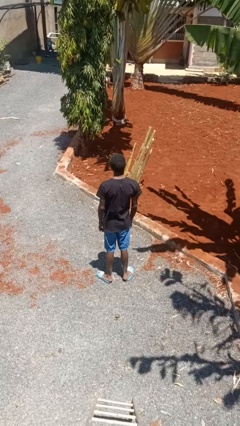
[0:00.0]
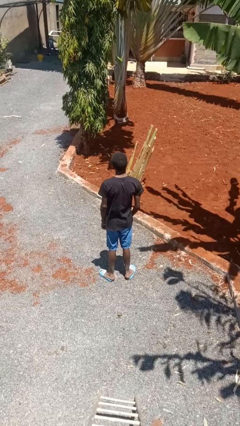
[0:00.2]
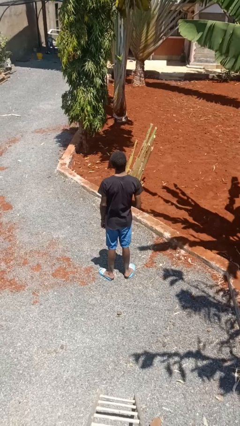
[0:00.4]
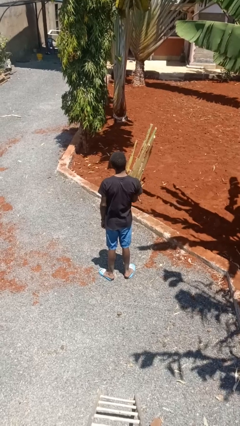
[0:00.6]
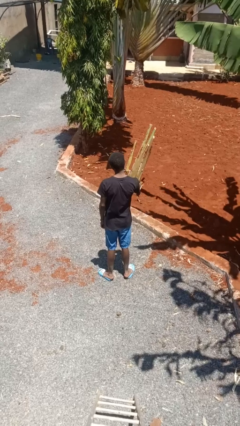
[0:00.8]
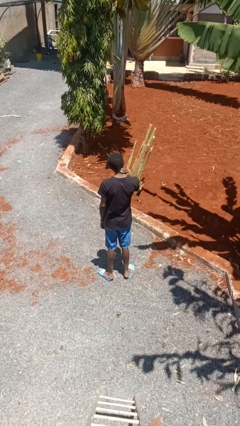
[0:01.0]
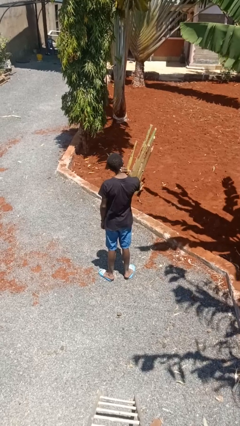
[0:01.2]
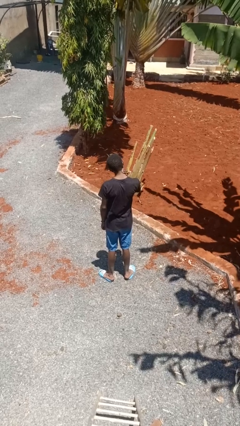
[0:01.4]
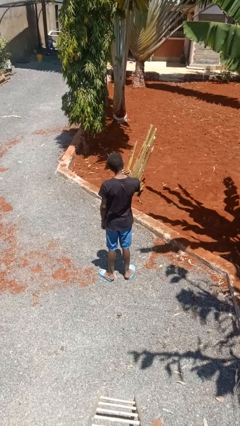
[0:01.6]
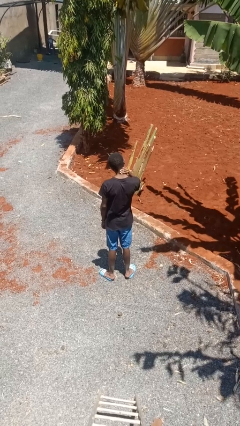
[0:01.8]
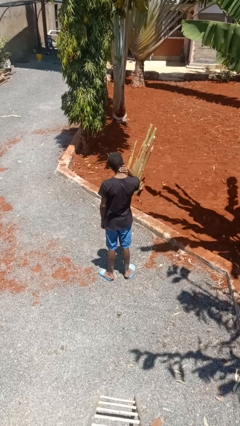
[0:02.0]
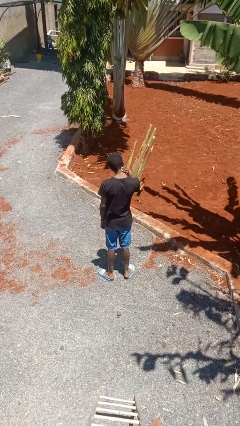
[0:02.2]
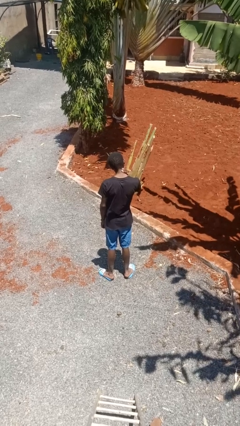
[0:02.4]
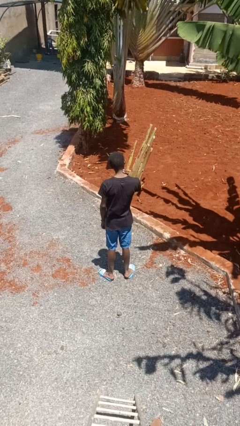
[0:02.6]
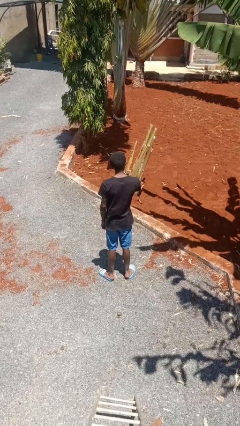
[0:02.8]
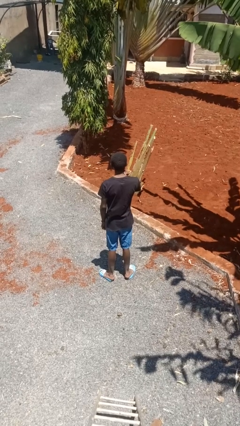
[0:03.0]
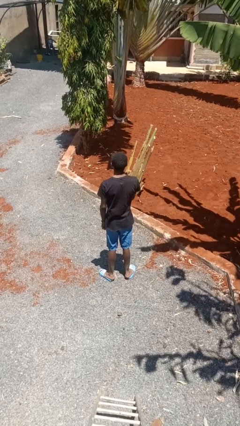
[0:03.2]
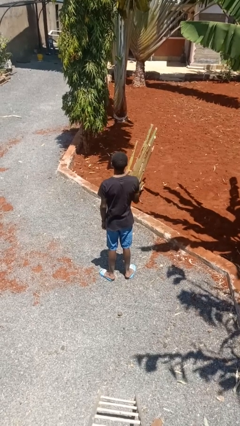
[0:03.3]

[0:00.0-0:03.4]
person rubs neck

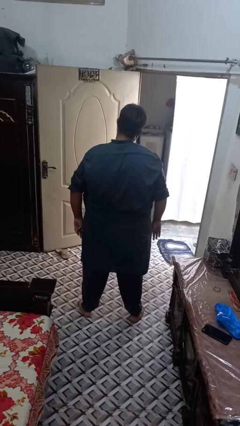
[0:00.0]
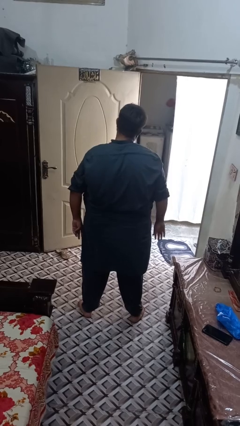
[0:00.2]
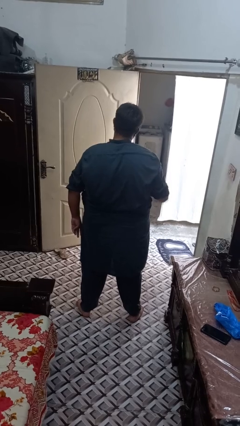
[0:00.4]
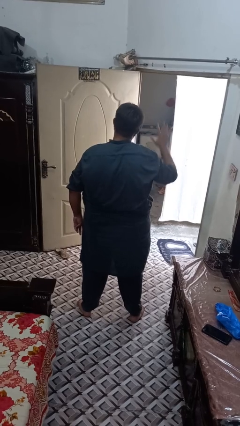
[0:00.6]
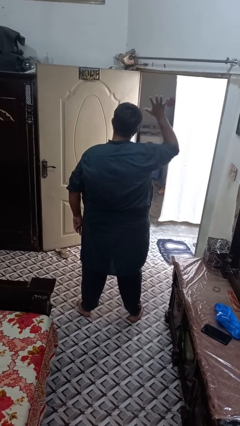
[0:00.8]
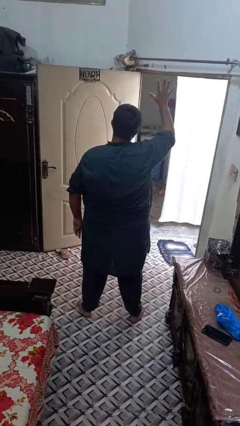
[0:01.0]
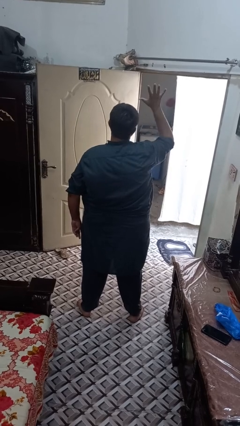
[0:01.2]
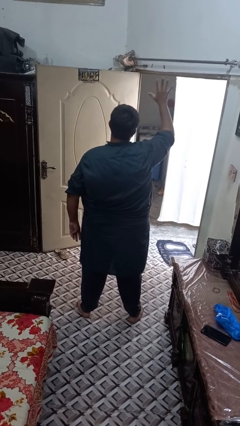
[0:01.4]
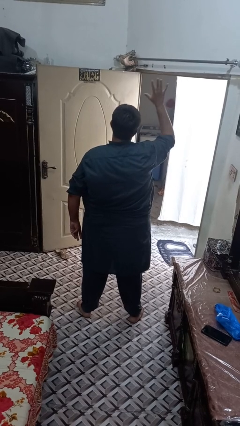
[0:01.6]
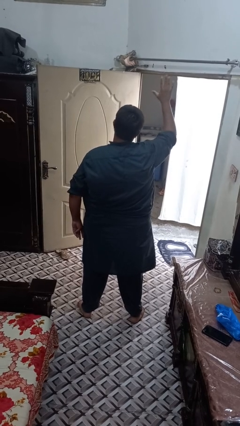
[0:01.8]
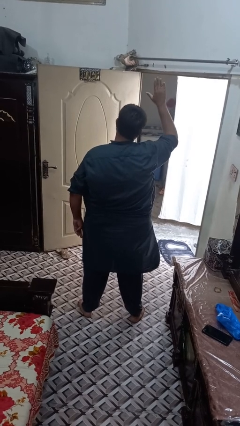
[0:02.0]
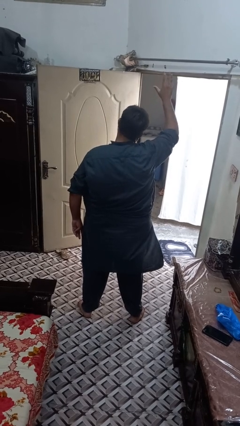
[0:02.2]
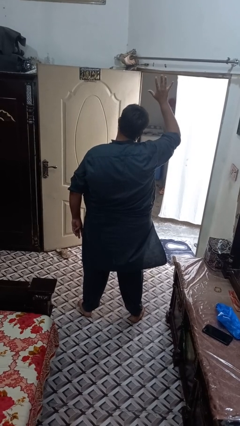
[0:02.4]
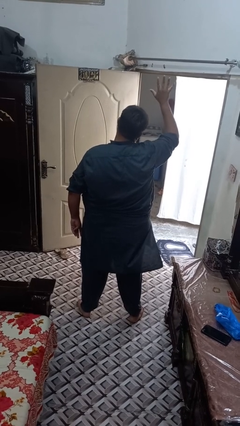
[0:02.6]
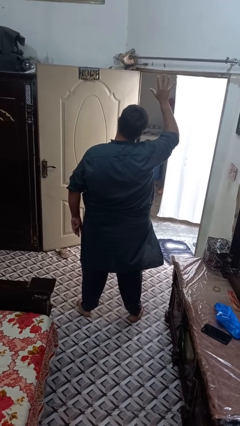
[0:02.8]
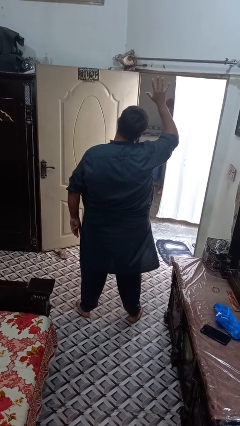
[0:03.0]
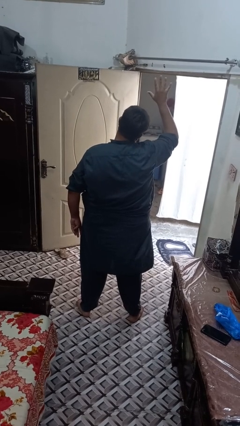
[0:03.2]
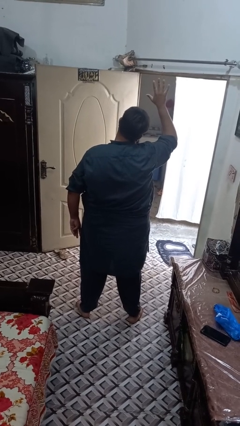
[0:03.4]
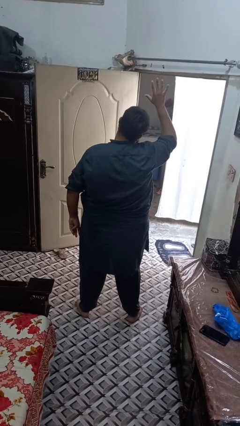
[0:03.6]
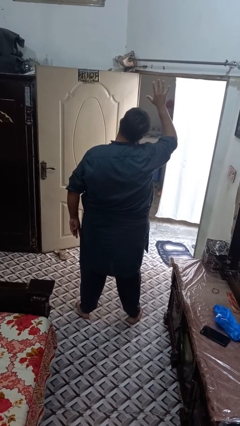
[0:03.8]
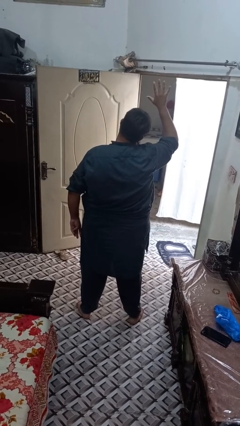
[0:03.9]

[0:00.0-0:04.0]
person gestures number five

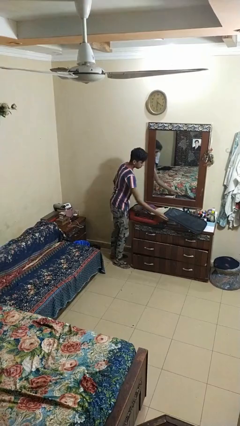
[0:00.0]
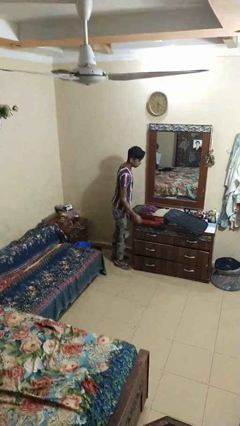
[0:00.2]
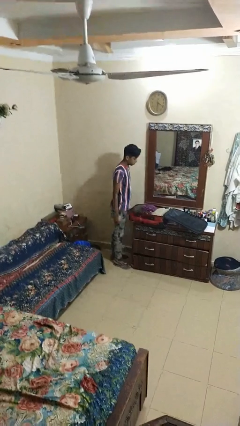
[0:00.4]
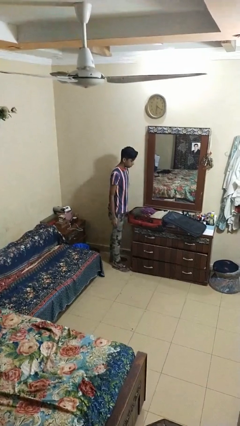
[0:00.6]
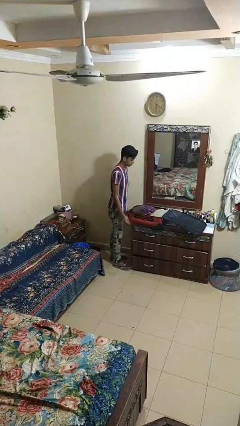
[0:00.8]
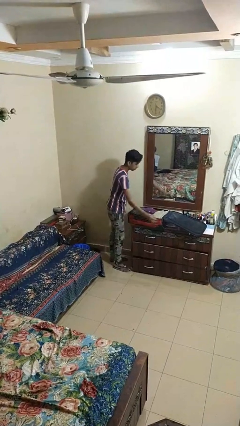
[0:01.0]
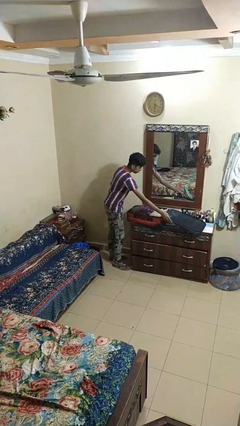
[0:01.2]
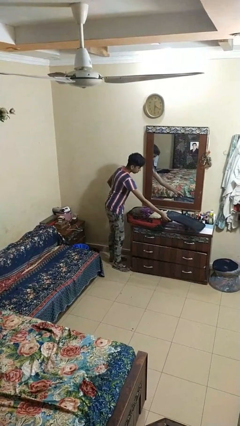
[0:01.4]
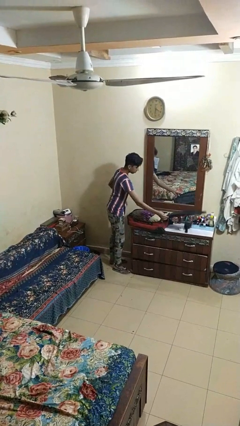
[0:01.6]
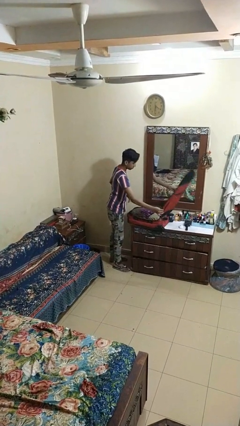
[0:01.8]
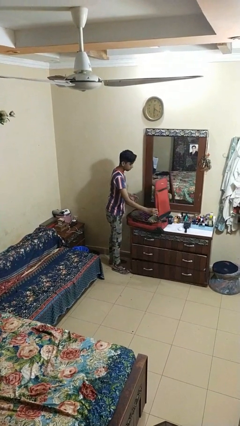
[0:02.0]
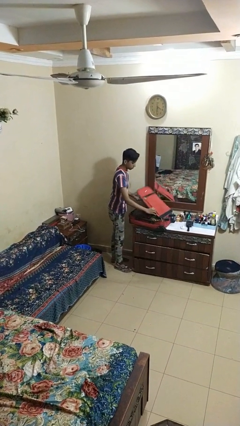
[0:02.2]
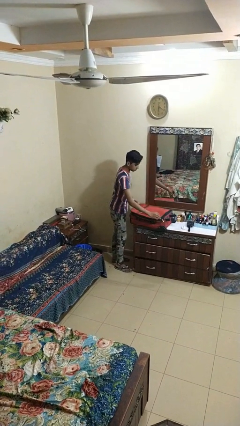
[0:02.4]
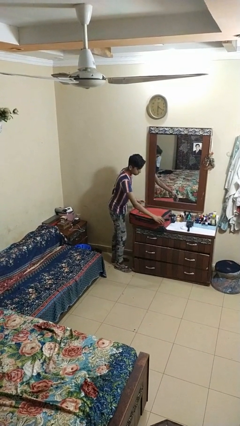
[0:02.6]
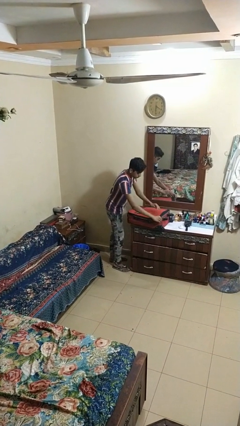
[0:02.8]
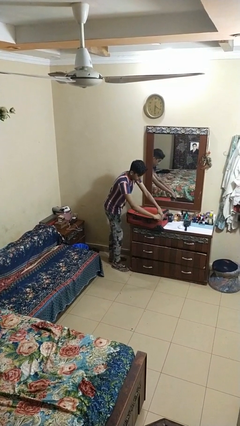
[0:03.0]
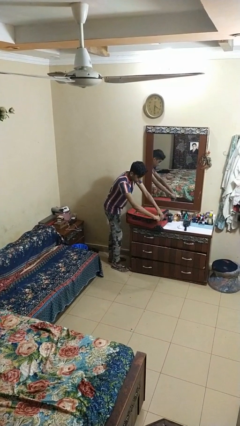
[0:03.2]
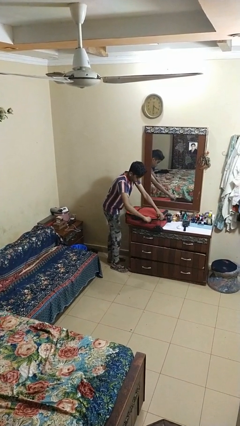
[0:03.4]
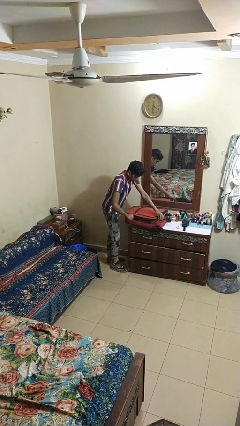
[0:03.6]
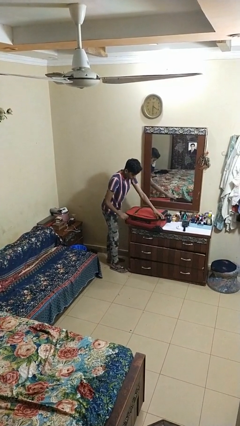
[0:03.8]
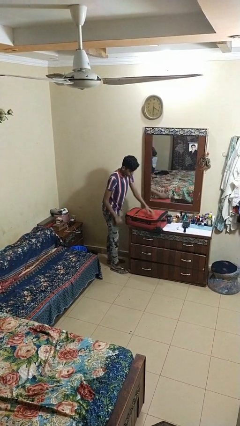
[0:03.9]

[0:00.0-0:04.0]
person closes suitcase

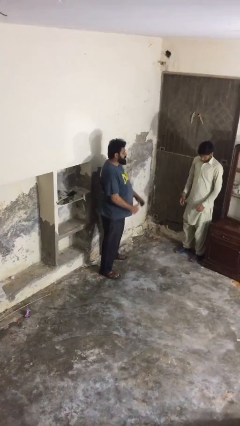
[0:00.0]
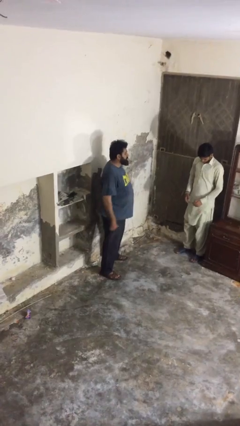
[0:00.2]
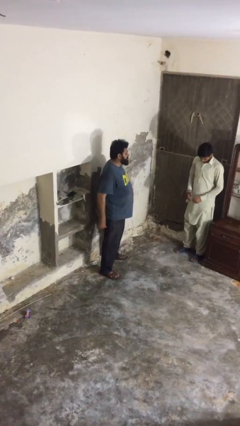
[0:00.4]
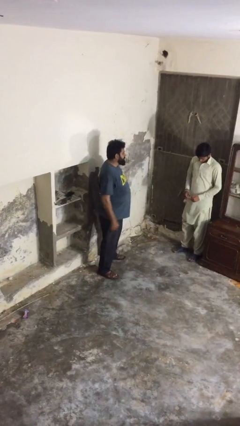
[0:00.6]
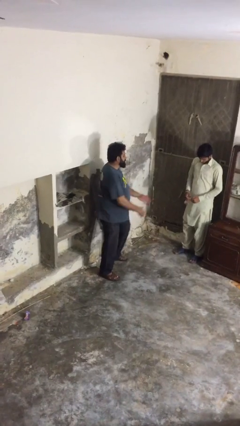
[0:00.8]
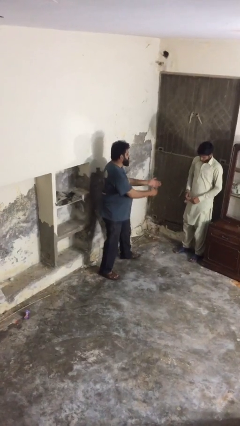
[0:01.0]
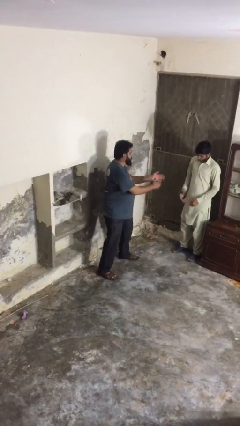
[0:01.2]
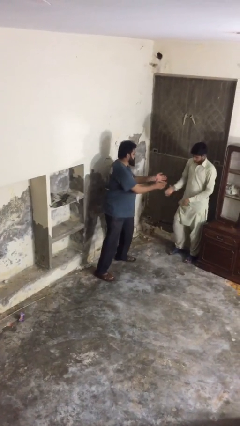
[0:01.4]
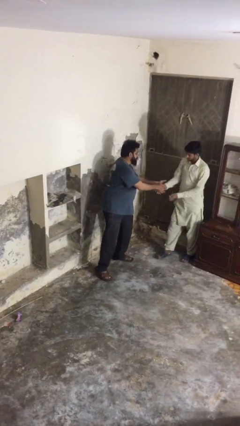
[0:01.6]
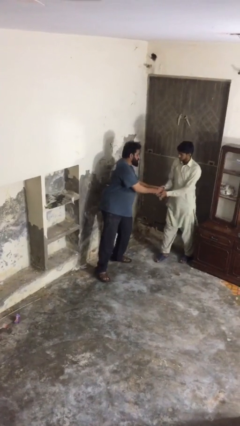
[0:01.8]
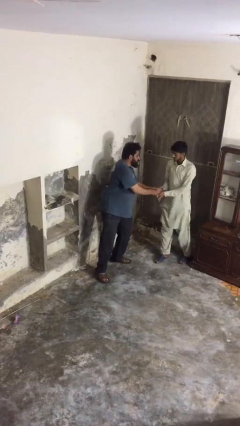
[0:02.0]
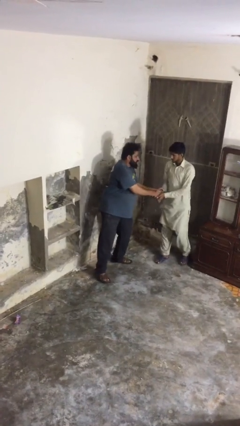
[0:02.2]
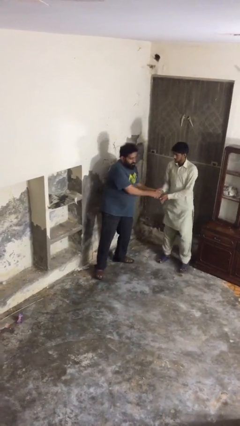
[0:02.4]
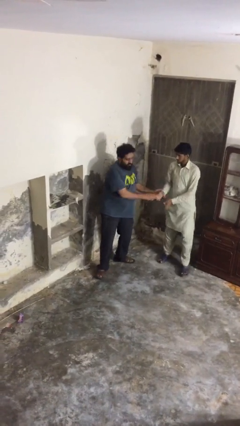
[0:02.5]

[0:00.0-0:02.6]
person shakes hand

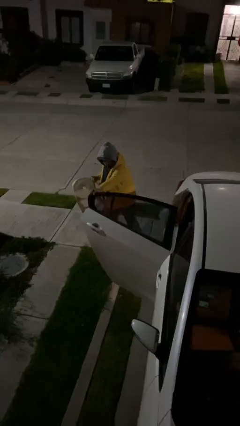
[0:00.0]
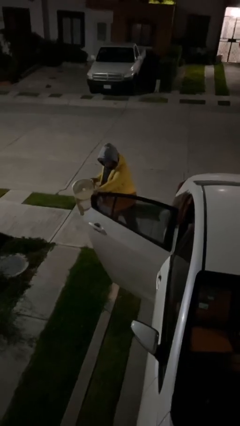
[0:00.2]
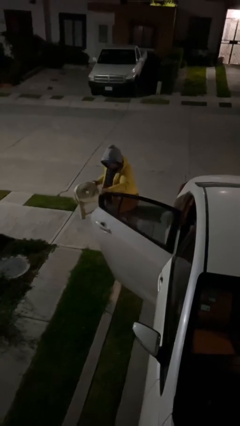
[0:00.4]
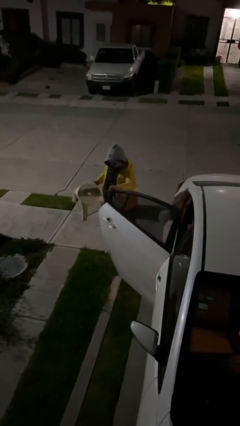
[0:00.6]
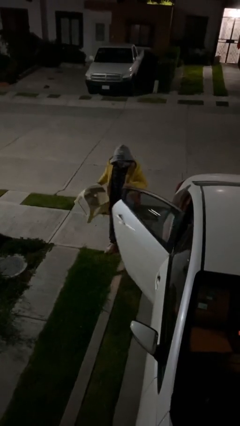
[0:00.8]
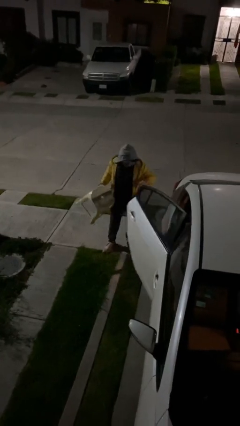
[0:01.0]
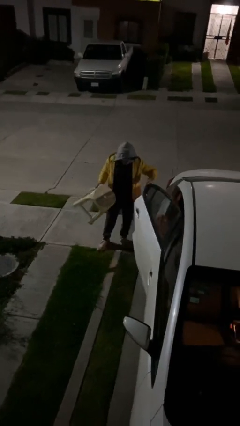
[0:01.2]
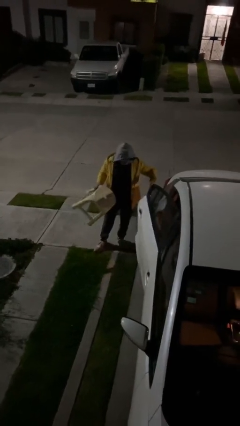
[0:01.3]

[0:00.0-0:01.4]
person closes car door

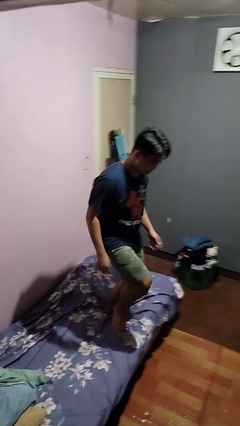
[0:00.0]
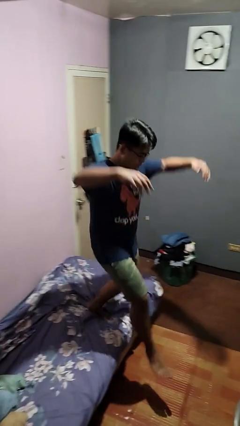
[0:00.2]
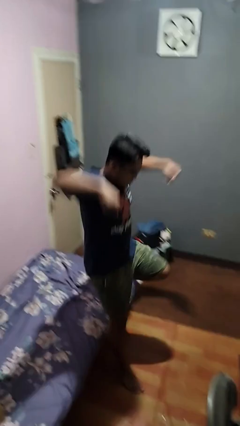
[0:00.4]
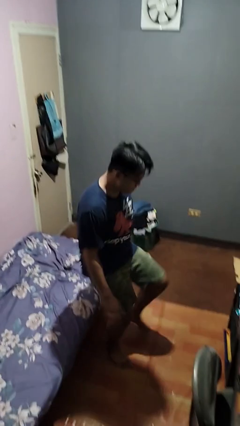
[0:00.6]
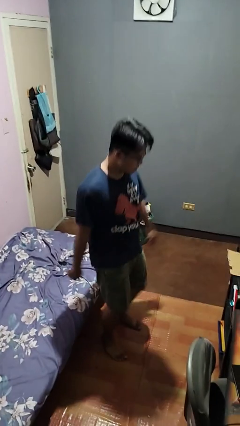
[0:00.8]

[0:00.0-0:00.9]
person jumps on bed

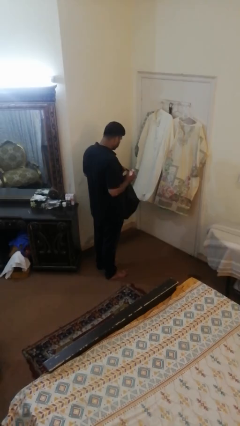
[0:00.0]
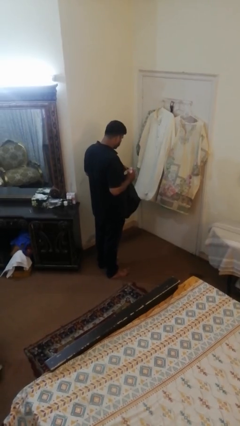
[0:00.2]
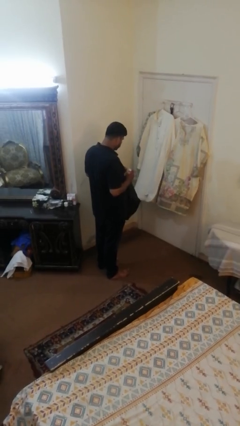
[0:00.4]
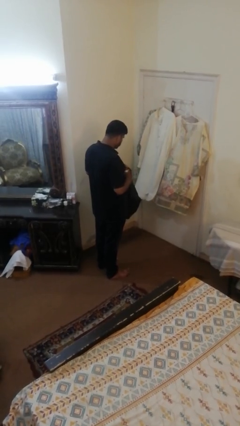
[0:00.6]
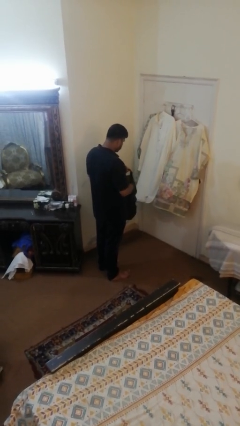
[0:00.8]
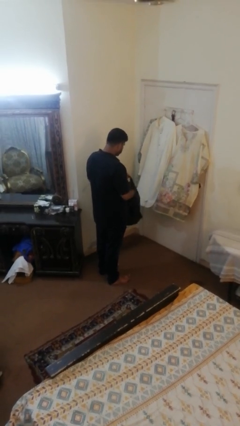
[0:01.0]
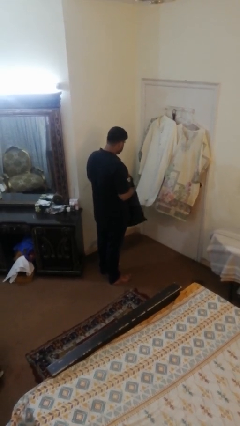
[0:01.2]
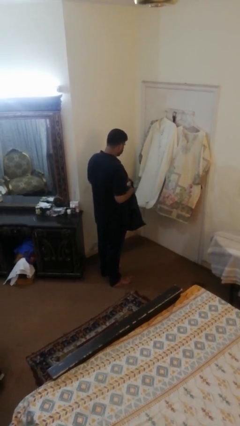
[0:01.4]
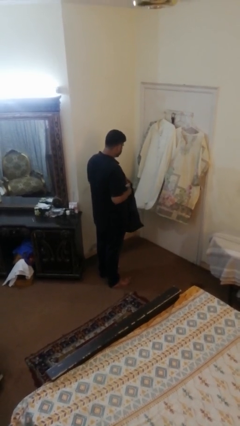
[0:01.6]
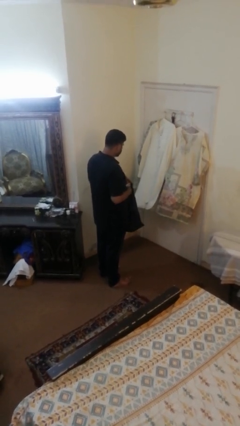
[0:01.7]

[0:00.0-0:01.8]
person puts object into bag
